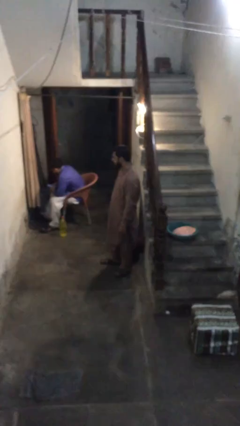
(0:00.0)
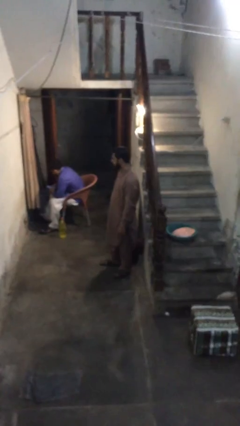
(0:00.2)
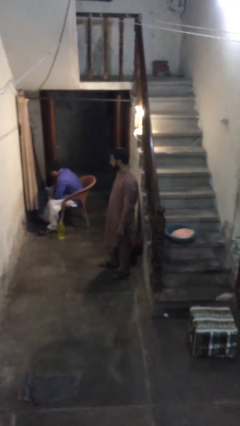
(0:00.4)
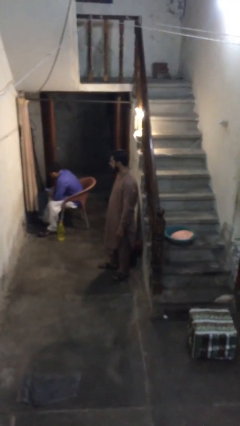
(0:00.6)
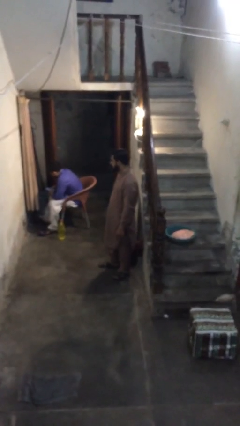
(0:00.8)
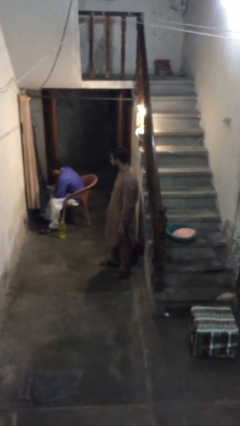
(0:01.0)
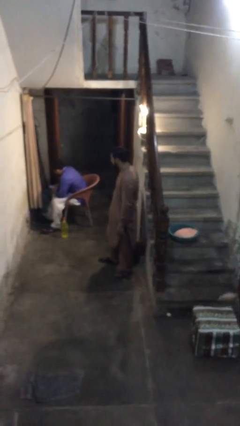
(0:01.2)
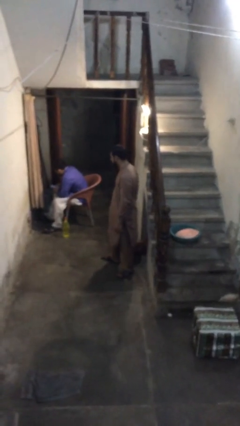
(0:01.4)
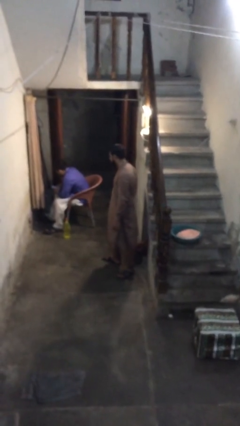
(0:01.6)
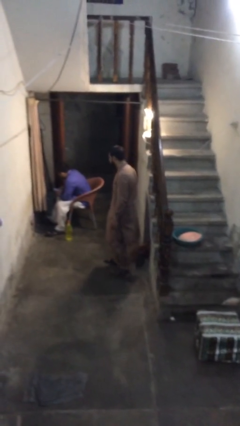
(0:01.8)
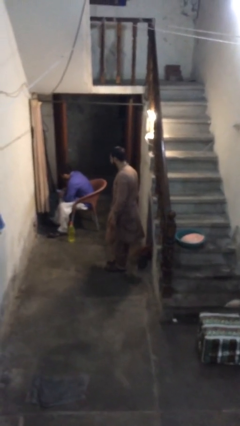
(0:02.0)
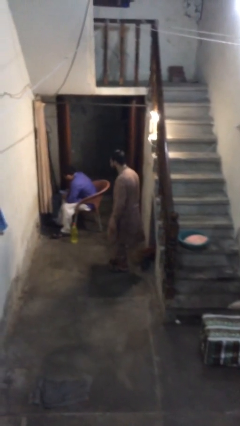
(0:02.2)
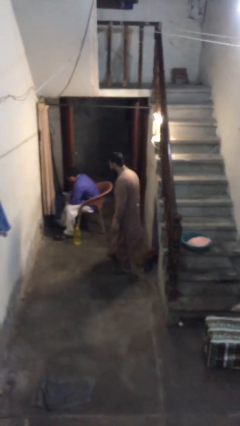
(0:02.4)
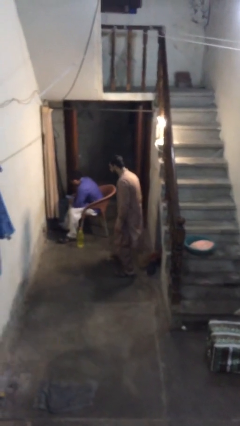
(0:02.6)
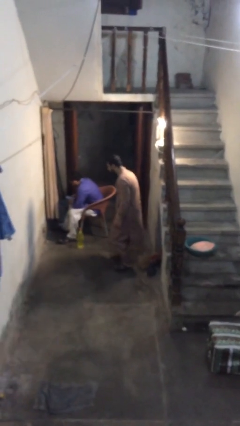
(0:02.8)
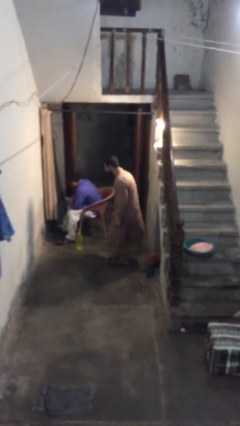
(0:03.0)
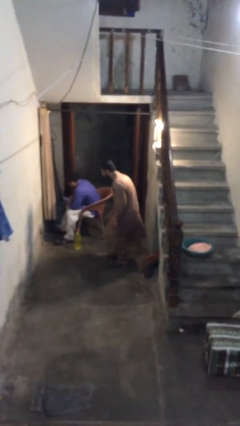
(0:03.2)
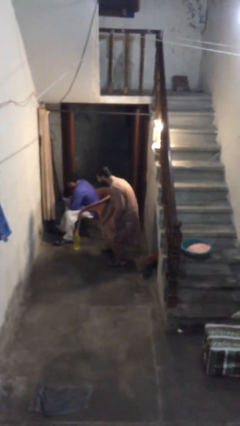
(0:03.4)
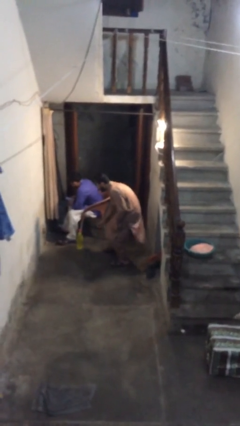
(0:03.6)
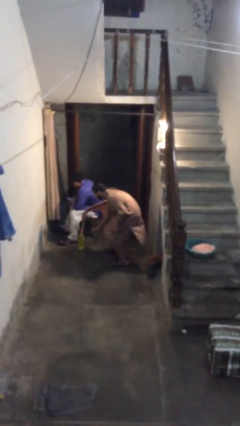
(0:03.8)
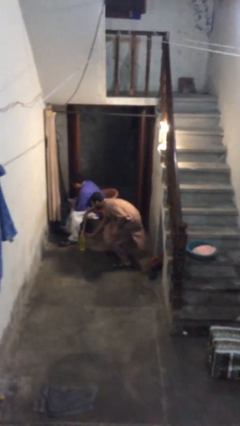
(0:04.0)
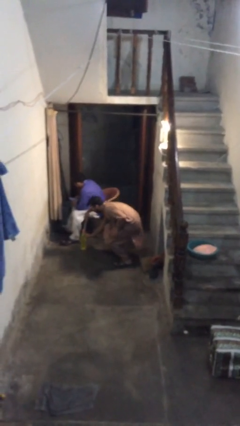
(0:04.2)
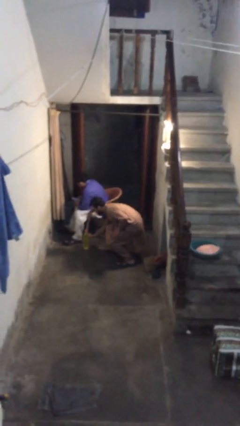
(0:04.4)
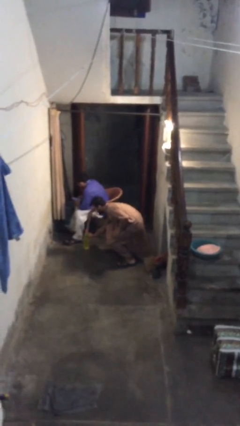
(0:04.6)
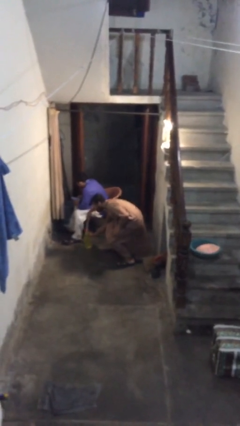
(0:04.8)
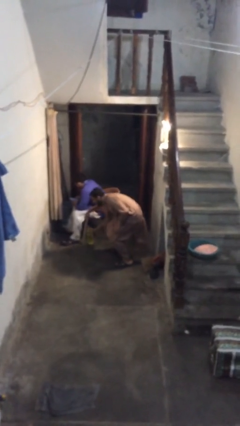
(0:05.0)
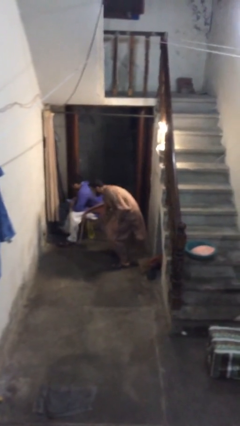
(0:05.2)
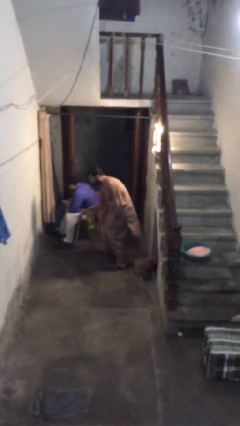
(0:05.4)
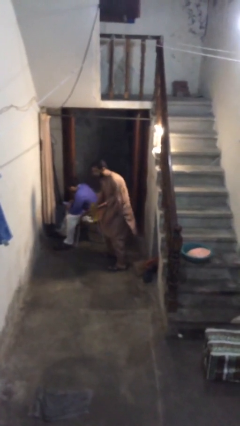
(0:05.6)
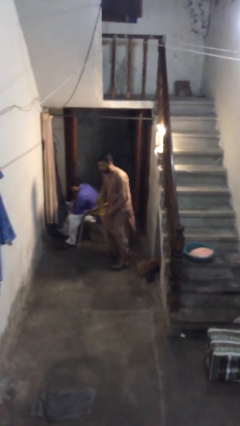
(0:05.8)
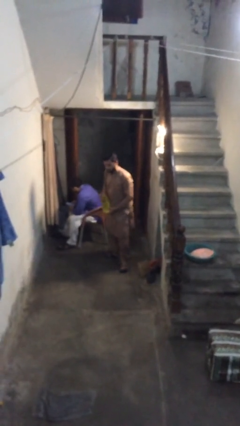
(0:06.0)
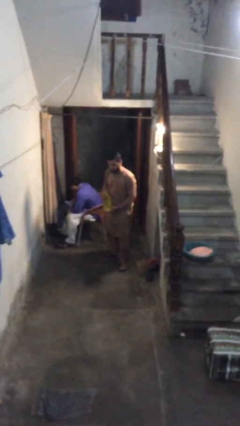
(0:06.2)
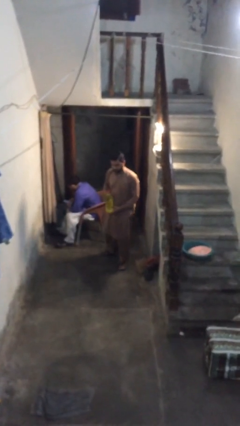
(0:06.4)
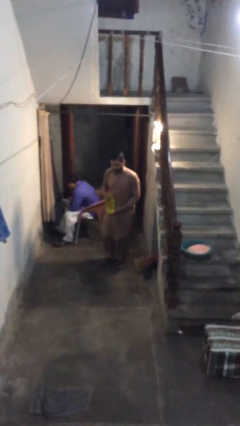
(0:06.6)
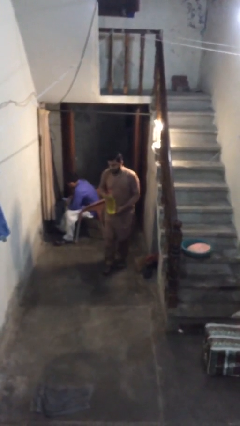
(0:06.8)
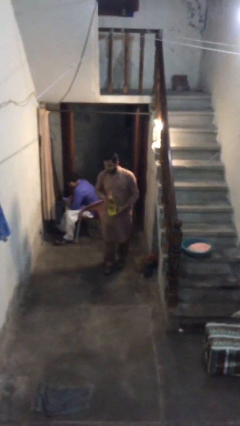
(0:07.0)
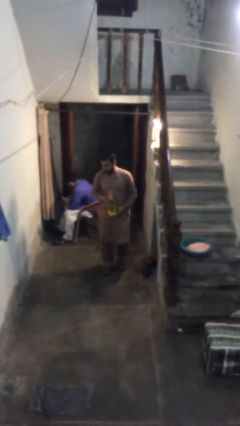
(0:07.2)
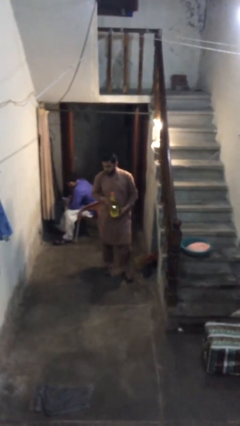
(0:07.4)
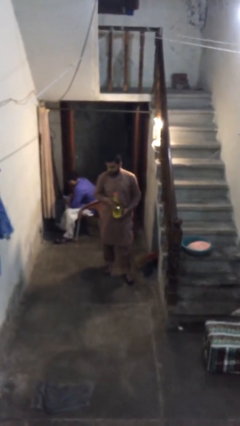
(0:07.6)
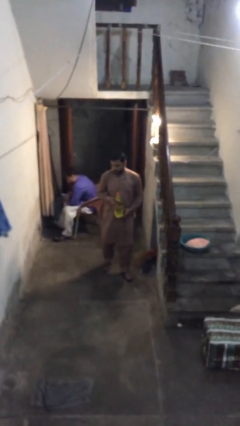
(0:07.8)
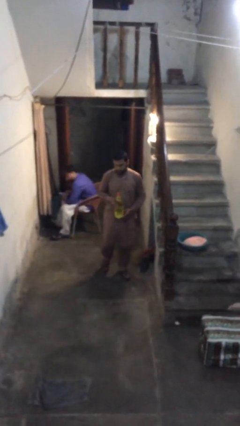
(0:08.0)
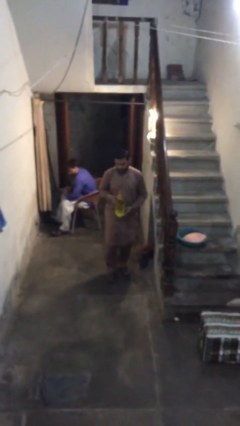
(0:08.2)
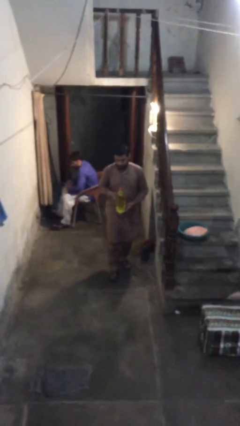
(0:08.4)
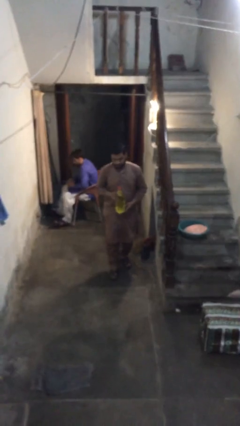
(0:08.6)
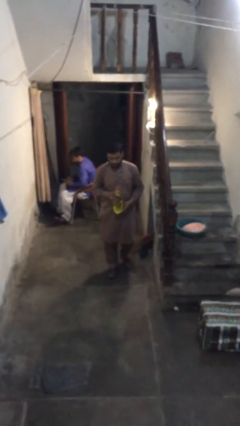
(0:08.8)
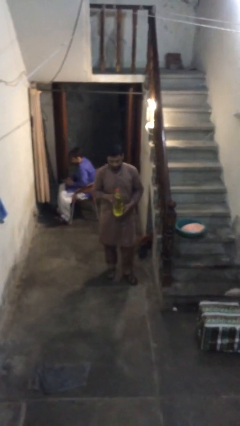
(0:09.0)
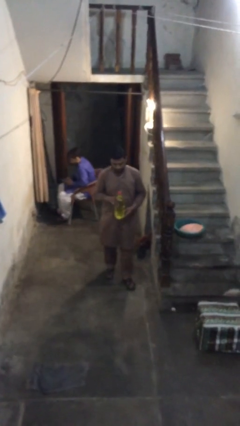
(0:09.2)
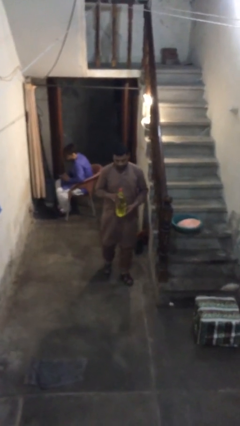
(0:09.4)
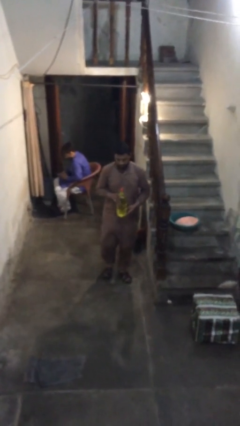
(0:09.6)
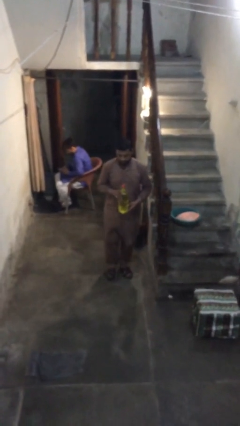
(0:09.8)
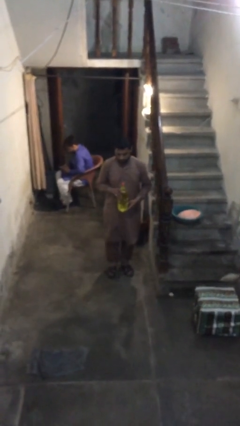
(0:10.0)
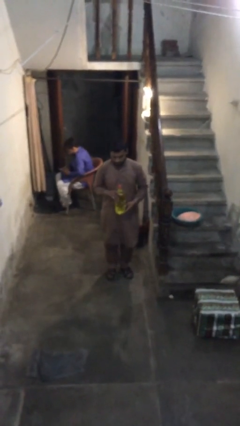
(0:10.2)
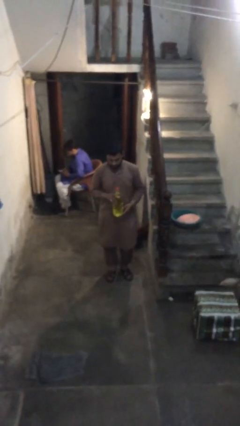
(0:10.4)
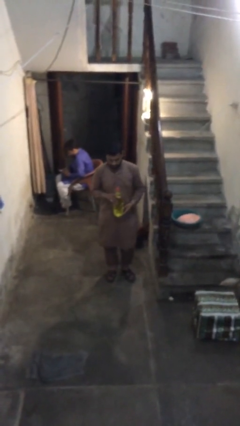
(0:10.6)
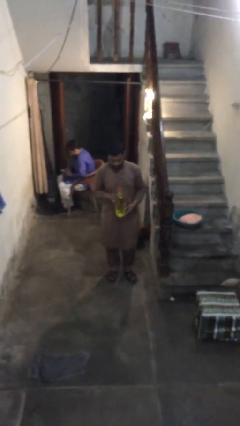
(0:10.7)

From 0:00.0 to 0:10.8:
person steals object from person

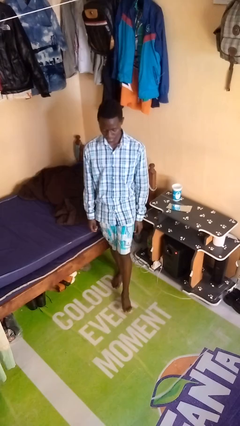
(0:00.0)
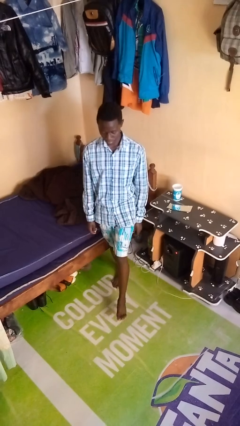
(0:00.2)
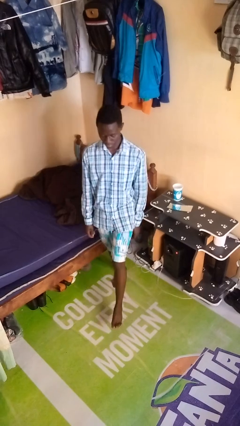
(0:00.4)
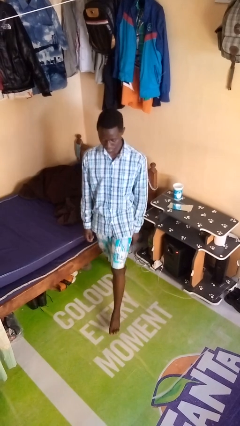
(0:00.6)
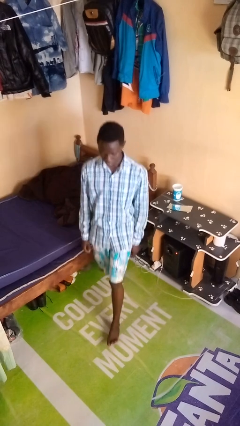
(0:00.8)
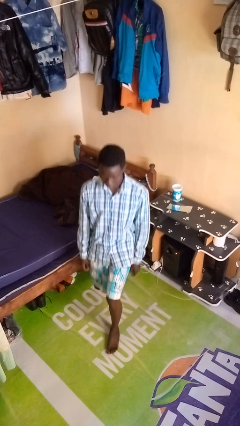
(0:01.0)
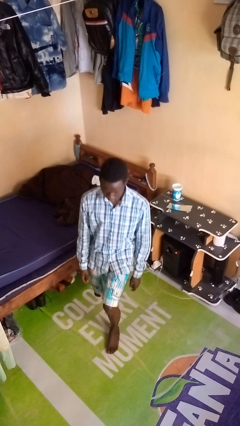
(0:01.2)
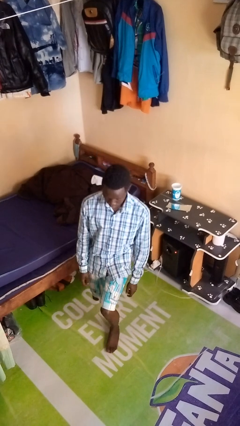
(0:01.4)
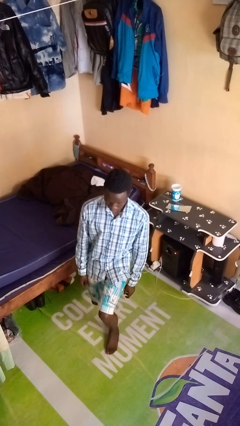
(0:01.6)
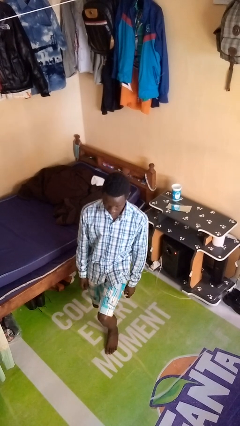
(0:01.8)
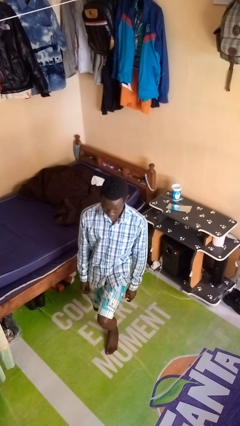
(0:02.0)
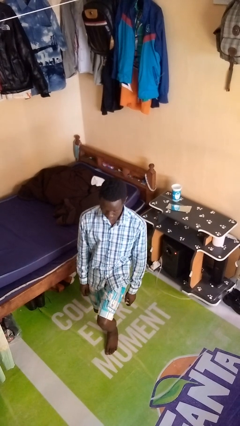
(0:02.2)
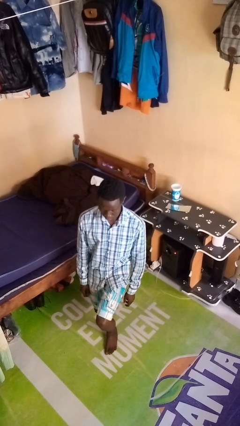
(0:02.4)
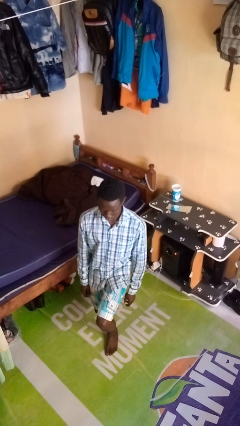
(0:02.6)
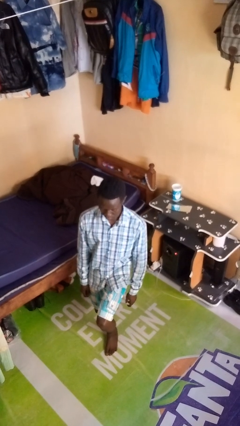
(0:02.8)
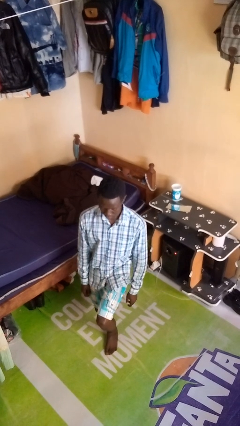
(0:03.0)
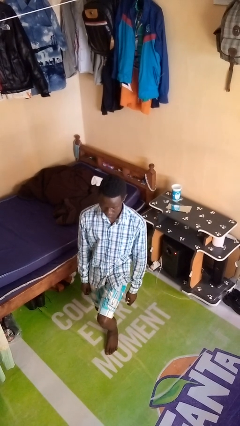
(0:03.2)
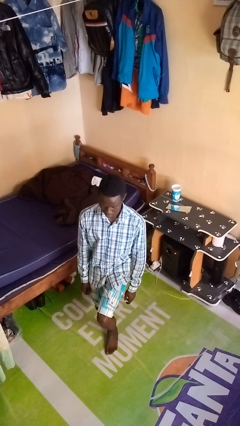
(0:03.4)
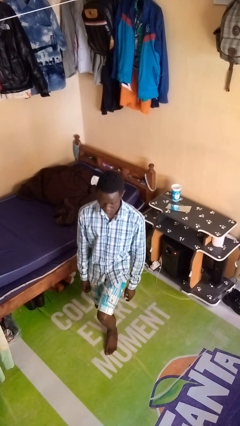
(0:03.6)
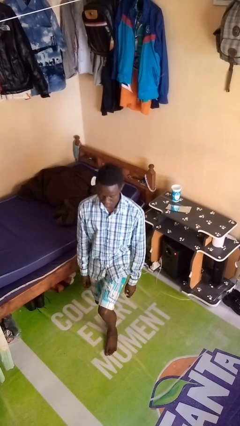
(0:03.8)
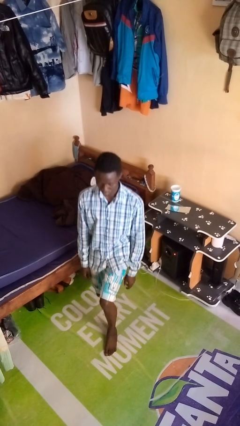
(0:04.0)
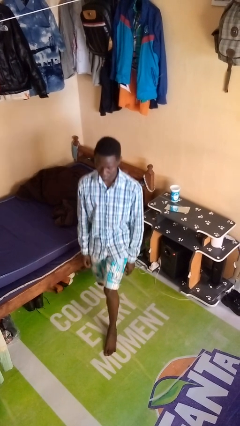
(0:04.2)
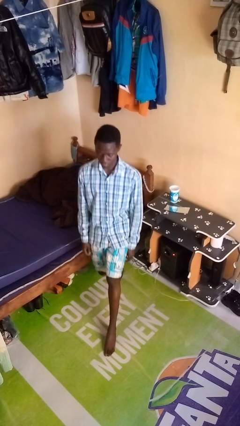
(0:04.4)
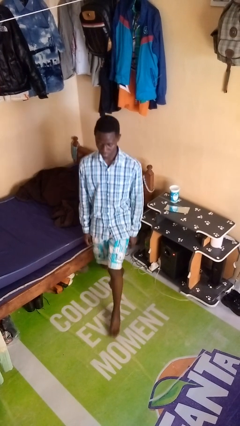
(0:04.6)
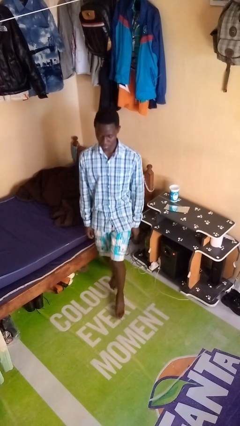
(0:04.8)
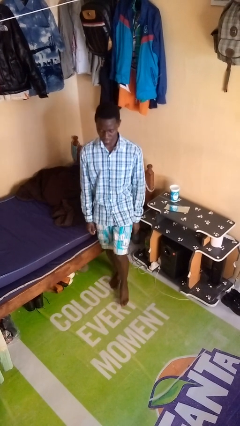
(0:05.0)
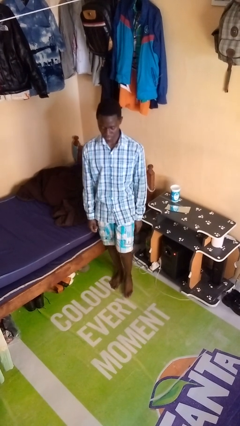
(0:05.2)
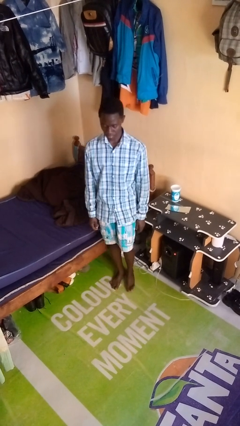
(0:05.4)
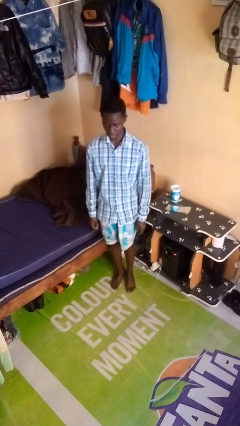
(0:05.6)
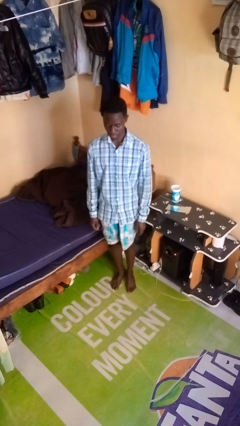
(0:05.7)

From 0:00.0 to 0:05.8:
person exercises with lunges

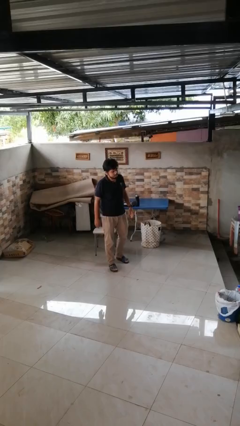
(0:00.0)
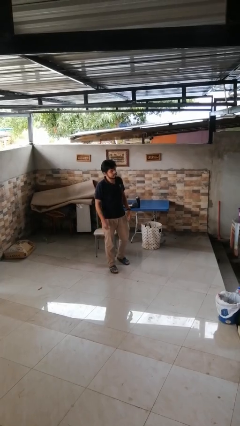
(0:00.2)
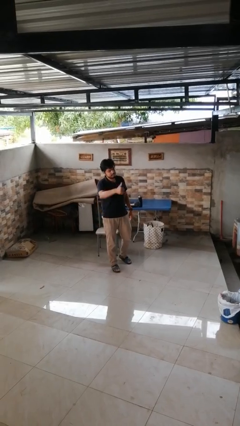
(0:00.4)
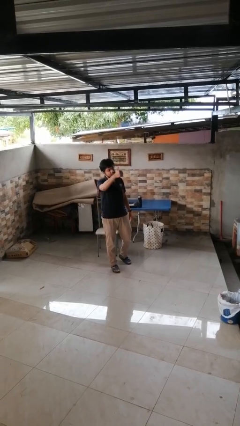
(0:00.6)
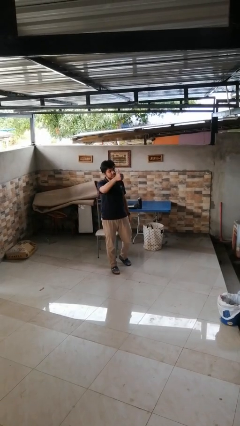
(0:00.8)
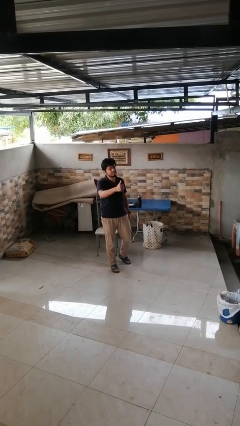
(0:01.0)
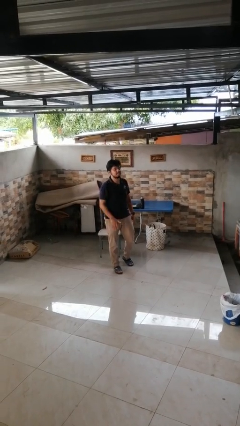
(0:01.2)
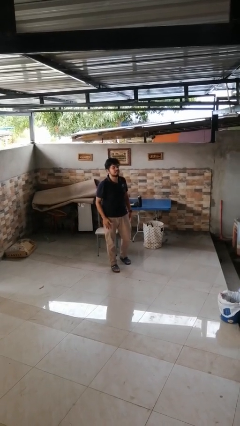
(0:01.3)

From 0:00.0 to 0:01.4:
person gestures thumbs up
